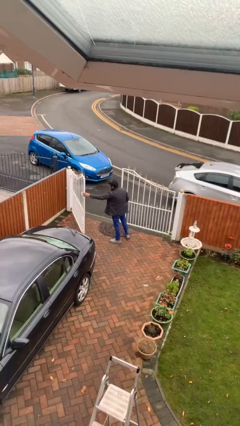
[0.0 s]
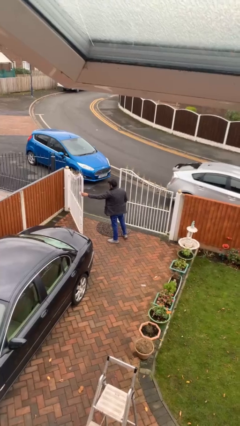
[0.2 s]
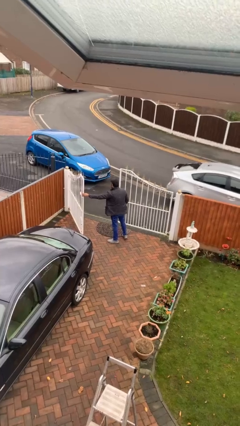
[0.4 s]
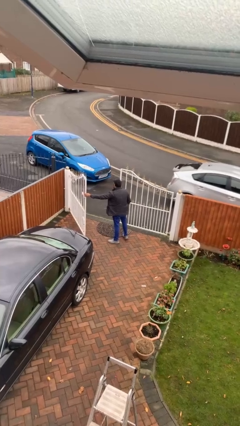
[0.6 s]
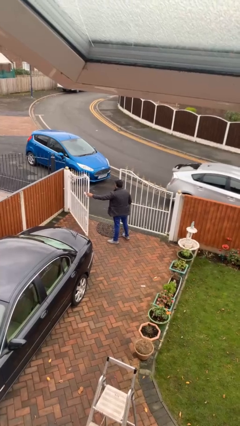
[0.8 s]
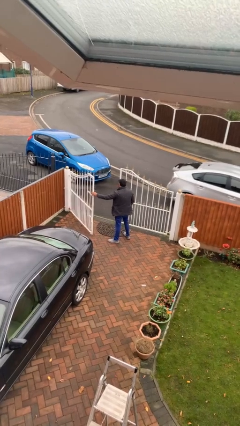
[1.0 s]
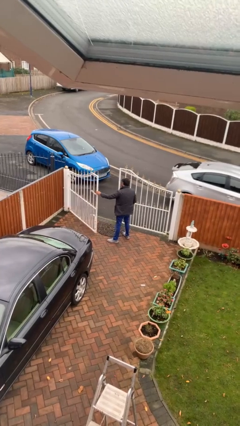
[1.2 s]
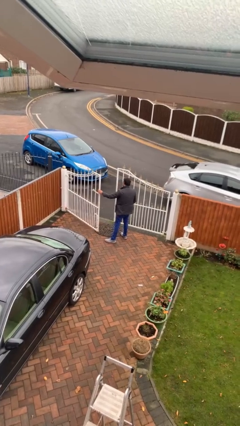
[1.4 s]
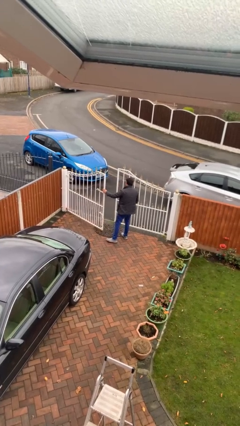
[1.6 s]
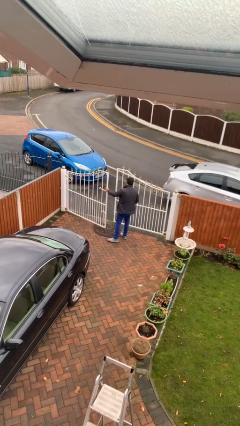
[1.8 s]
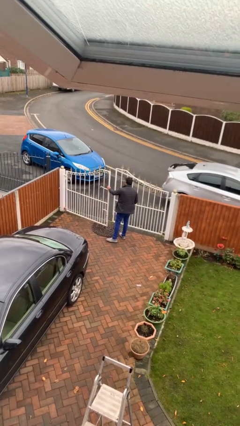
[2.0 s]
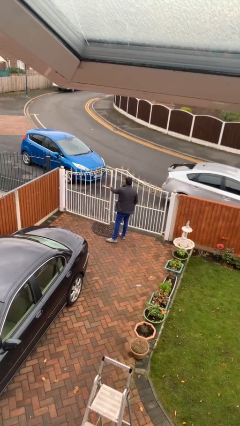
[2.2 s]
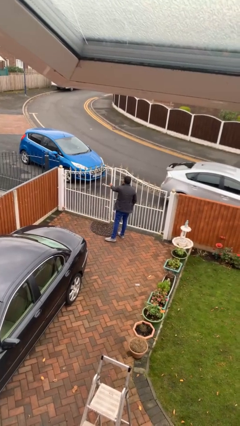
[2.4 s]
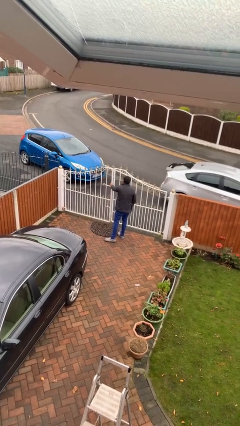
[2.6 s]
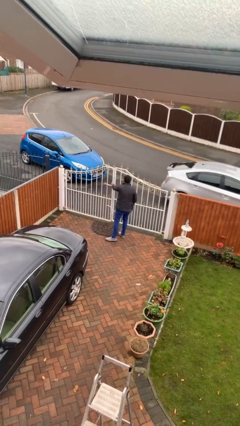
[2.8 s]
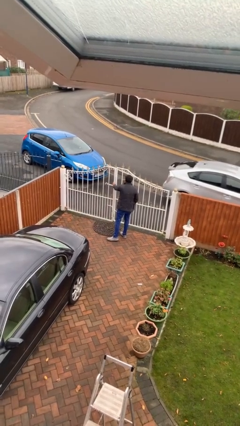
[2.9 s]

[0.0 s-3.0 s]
person closes facility door

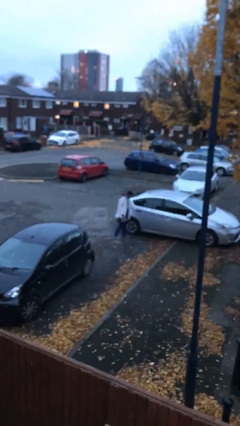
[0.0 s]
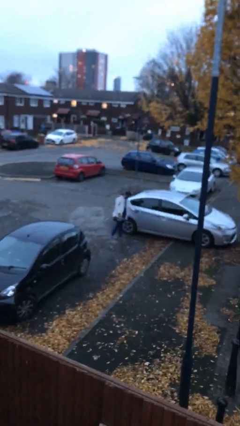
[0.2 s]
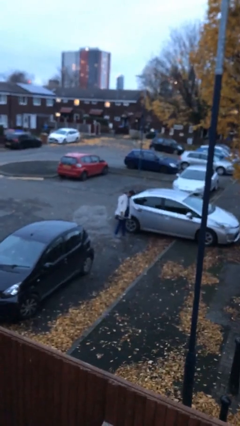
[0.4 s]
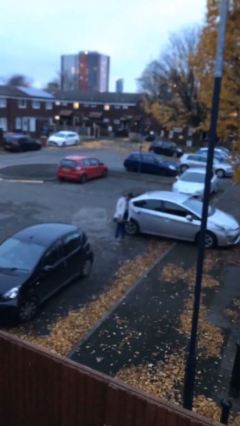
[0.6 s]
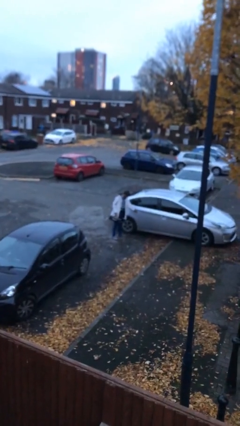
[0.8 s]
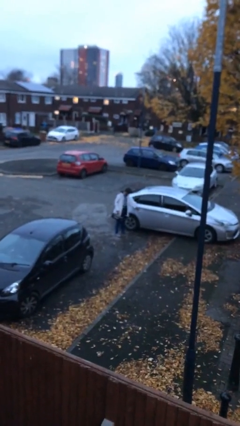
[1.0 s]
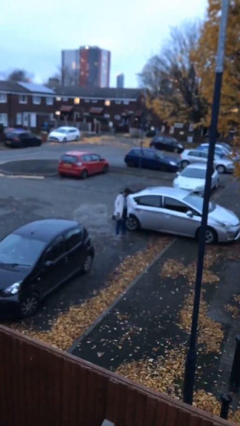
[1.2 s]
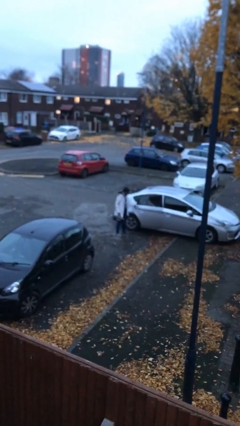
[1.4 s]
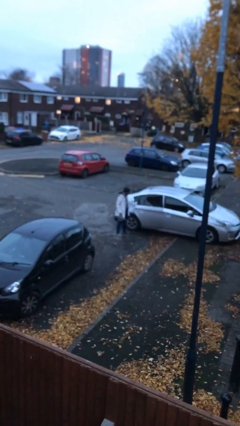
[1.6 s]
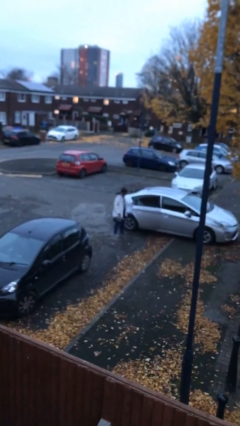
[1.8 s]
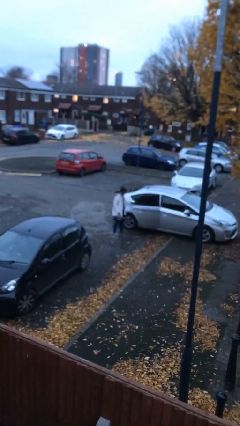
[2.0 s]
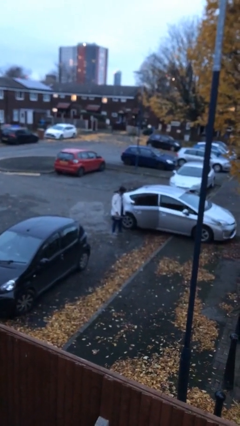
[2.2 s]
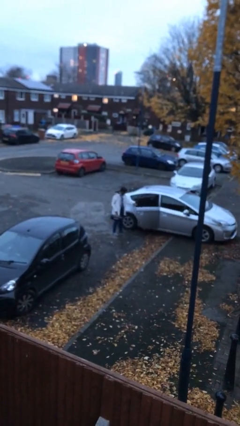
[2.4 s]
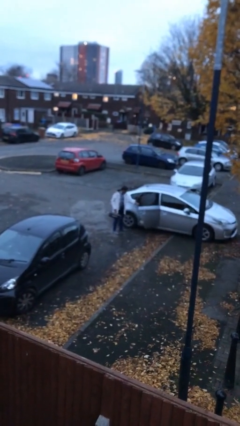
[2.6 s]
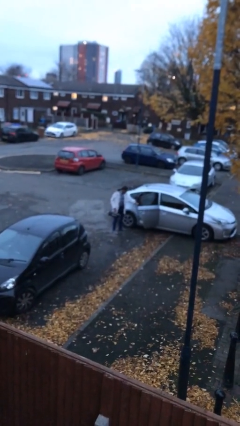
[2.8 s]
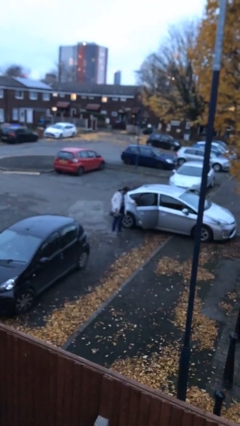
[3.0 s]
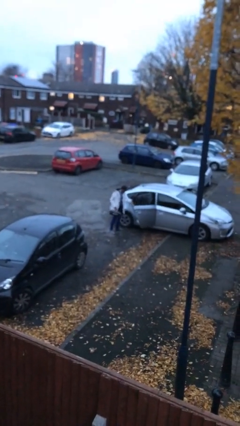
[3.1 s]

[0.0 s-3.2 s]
person opens car door

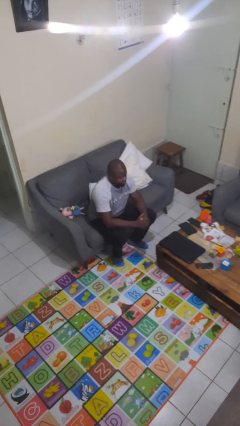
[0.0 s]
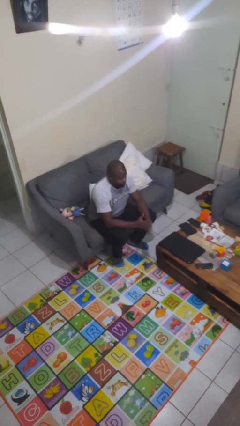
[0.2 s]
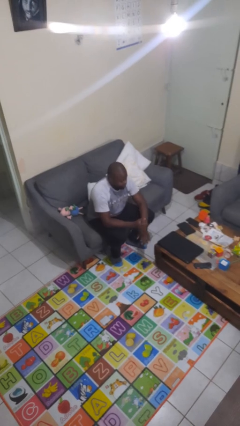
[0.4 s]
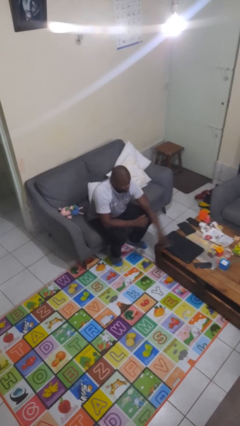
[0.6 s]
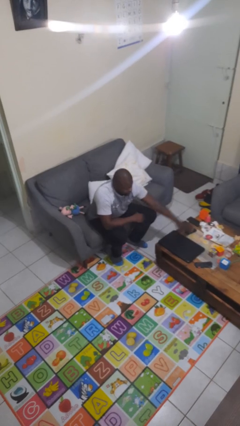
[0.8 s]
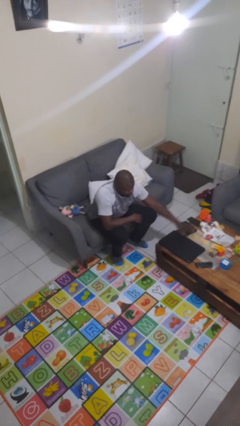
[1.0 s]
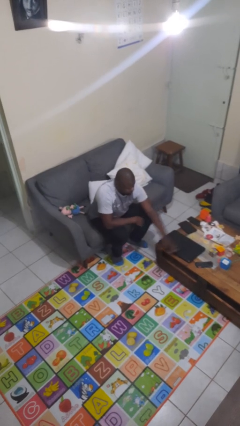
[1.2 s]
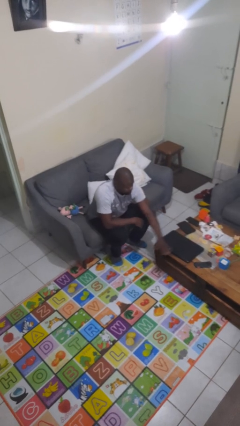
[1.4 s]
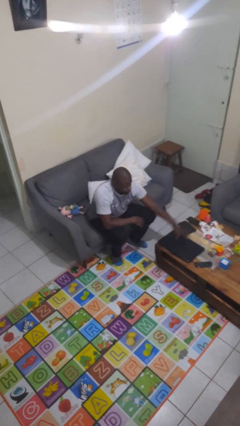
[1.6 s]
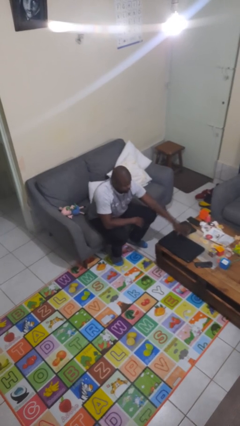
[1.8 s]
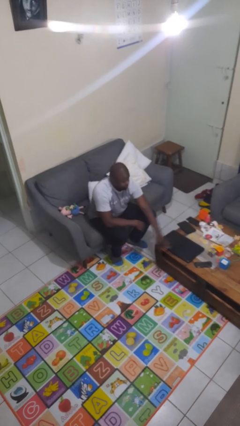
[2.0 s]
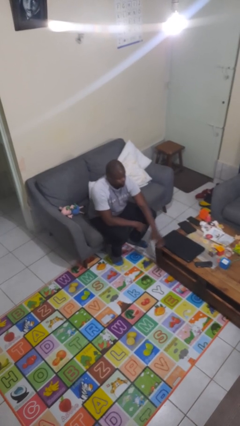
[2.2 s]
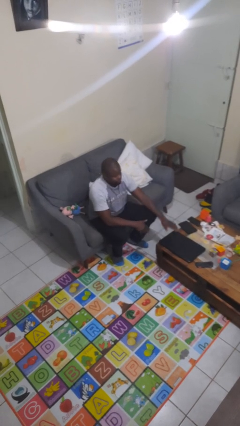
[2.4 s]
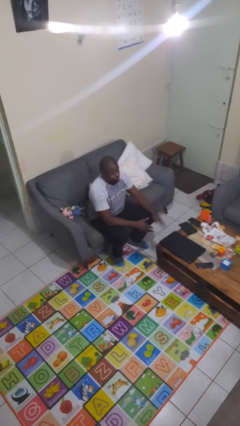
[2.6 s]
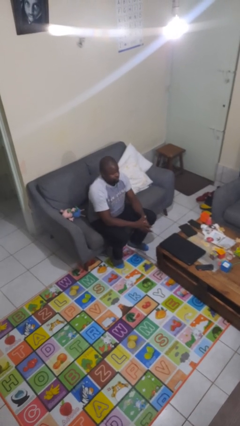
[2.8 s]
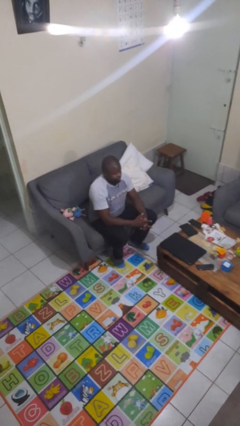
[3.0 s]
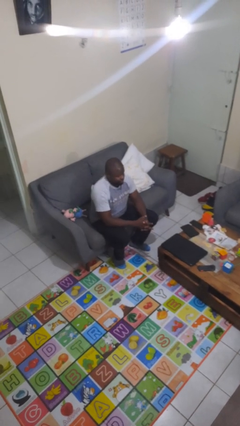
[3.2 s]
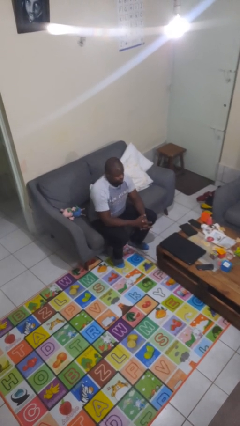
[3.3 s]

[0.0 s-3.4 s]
person waves hand over object

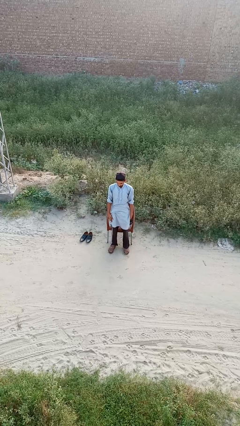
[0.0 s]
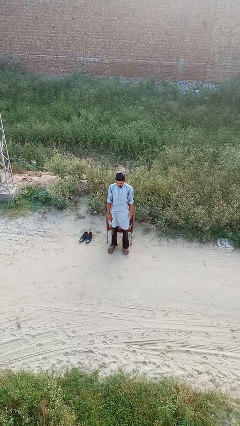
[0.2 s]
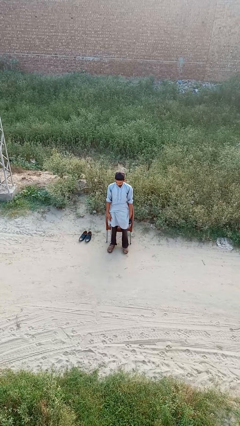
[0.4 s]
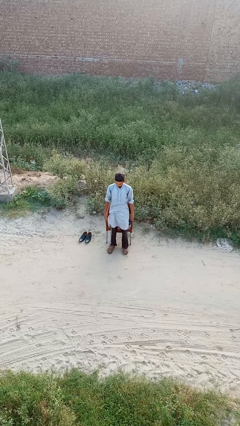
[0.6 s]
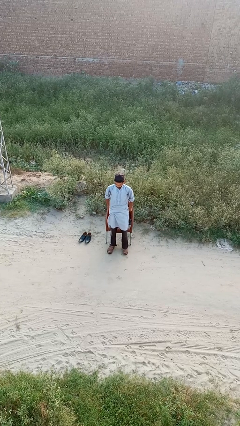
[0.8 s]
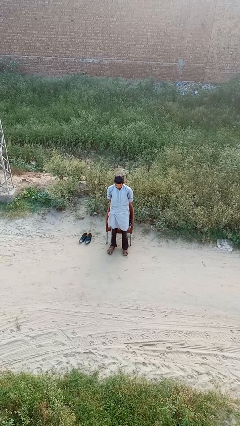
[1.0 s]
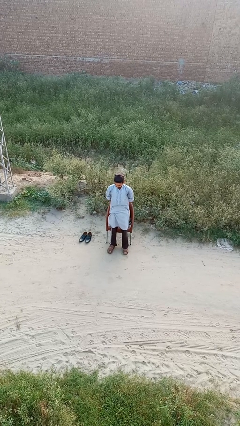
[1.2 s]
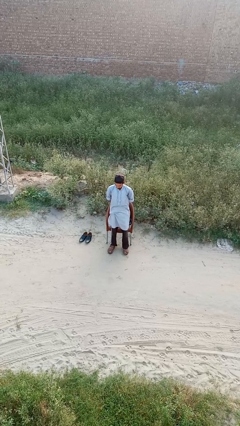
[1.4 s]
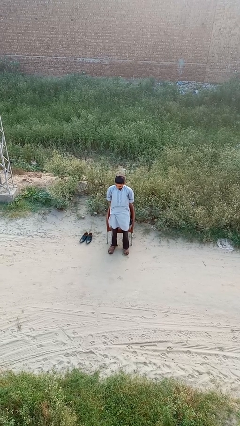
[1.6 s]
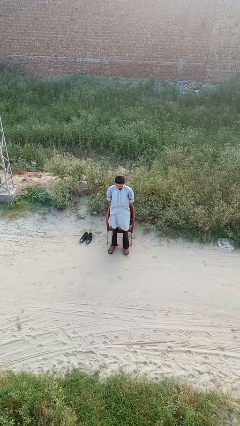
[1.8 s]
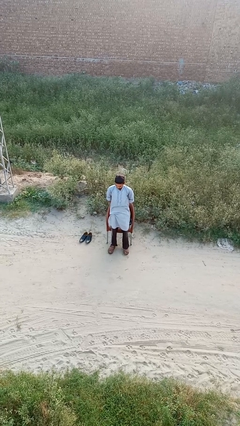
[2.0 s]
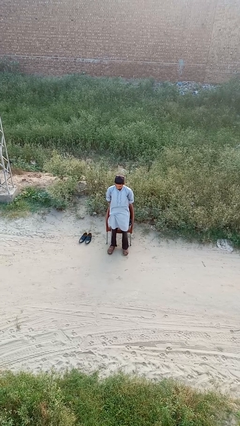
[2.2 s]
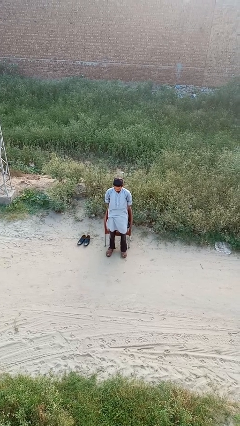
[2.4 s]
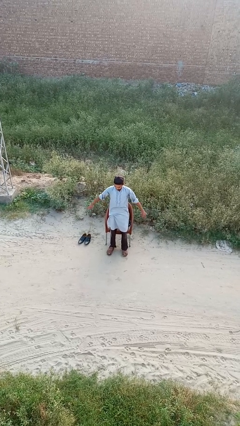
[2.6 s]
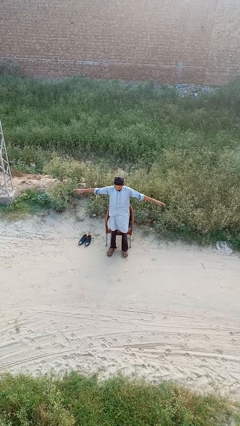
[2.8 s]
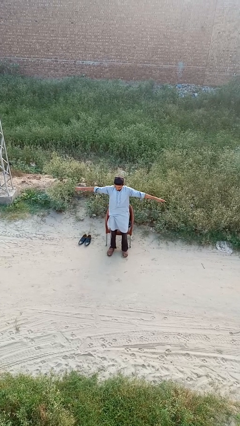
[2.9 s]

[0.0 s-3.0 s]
person stretches back

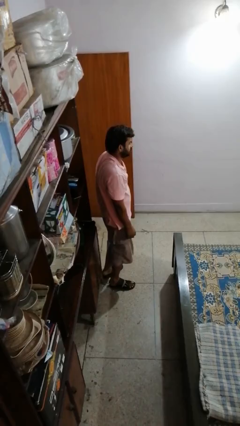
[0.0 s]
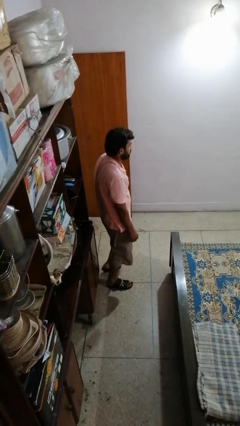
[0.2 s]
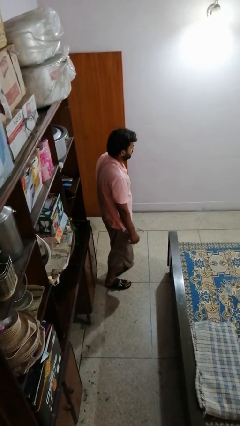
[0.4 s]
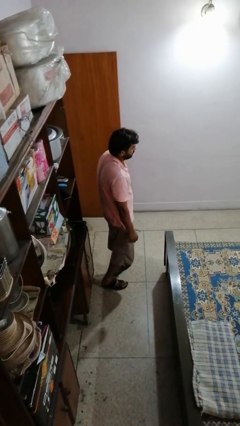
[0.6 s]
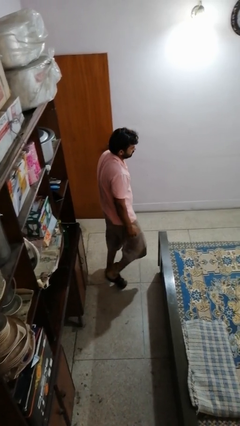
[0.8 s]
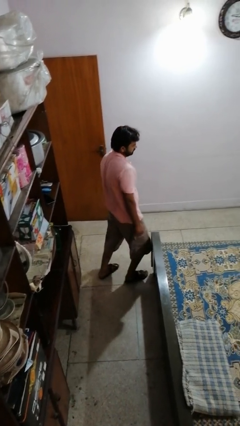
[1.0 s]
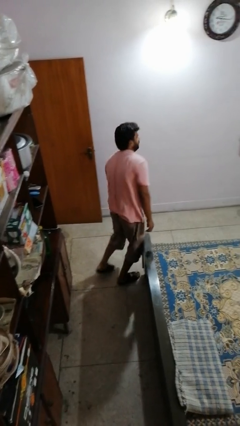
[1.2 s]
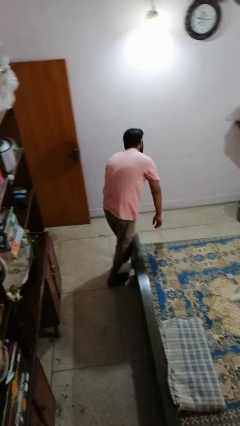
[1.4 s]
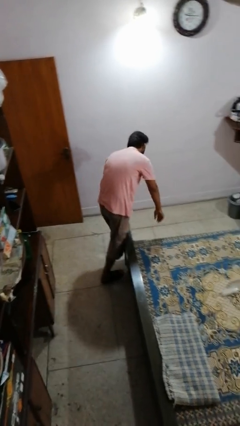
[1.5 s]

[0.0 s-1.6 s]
person trips on object on floor

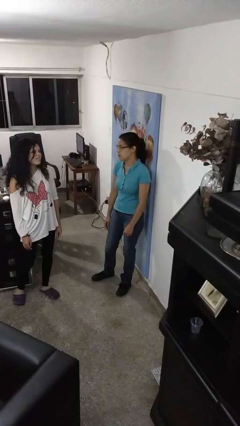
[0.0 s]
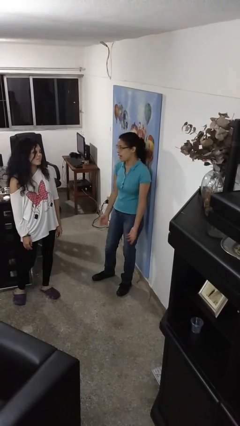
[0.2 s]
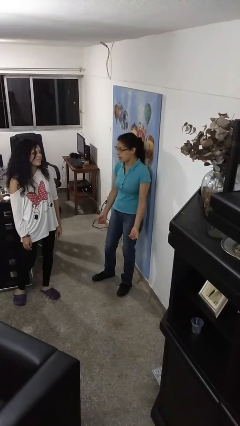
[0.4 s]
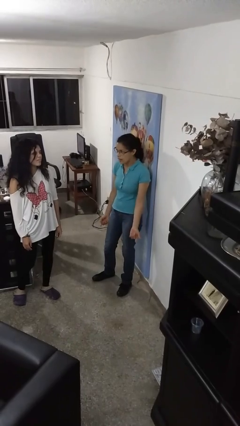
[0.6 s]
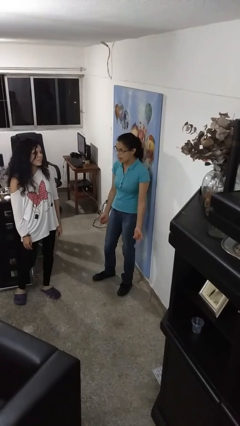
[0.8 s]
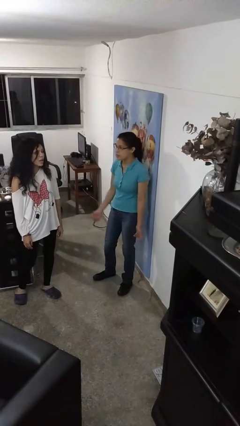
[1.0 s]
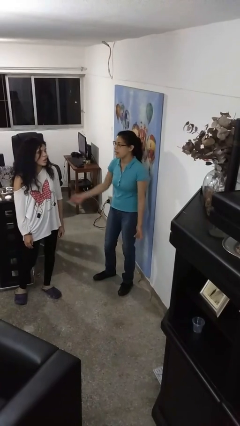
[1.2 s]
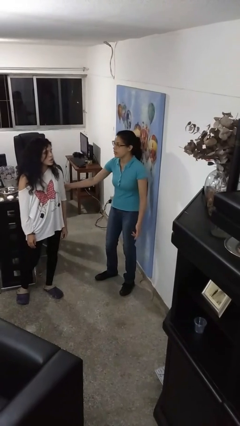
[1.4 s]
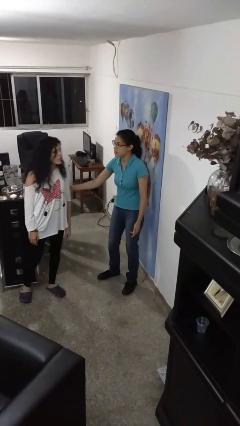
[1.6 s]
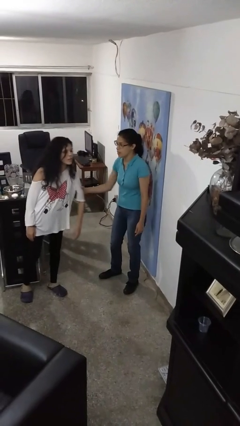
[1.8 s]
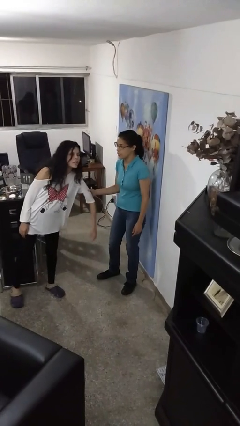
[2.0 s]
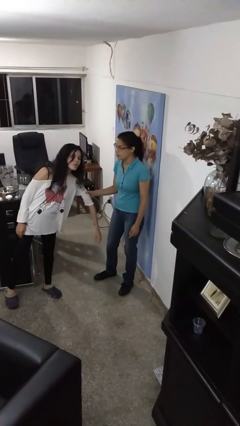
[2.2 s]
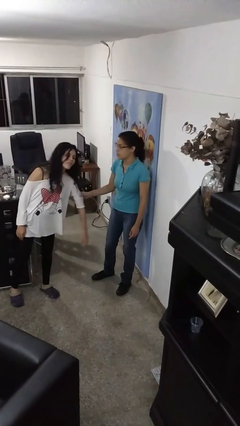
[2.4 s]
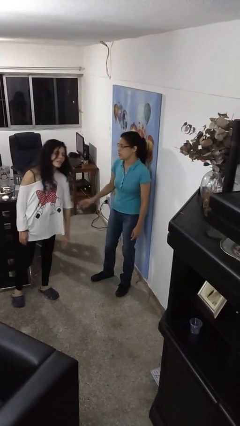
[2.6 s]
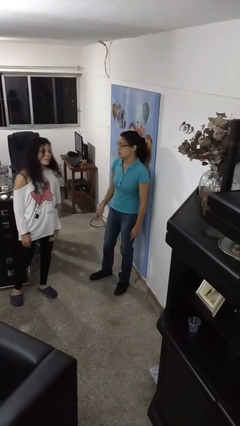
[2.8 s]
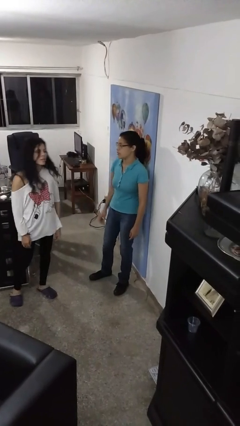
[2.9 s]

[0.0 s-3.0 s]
person grabs person by bicep

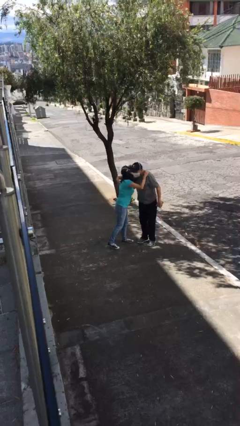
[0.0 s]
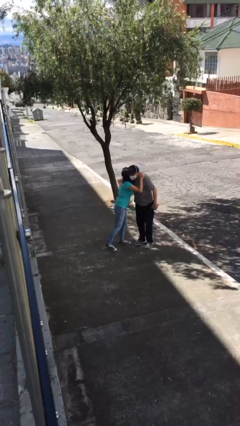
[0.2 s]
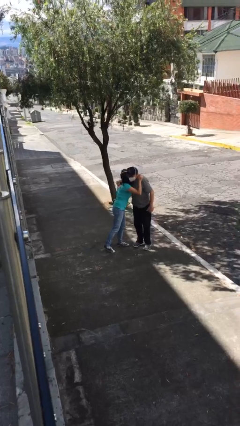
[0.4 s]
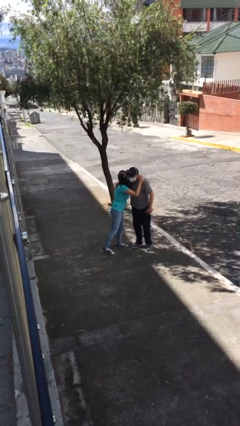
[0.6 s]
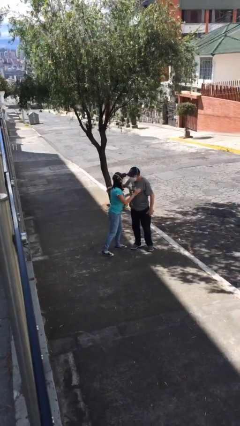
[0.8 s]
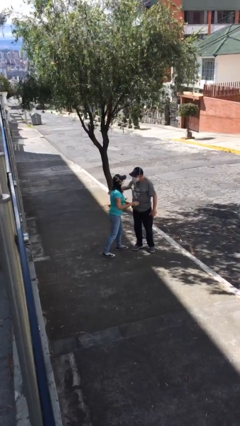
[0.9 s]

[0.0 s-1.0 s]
person embraces person
